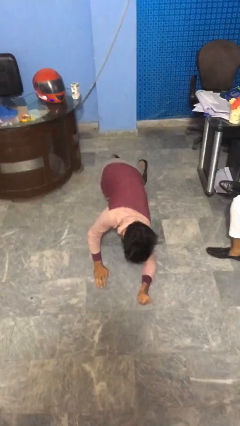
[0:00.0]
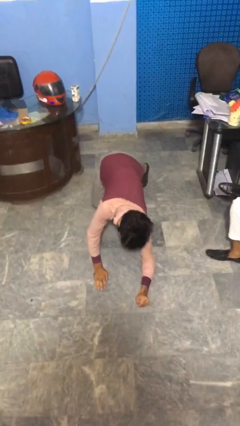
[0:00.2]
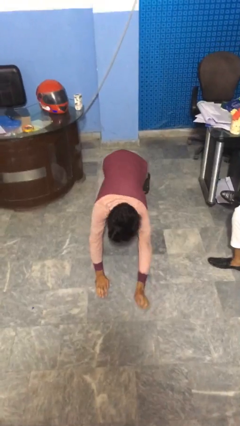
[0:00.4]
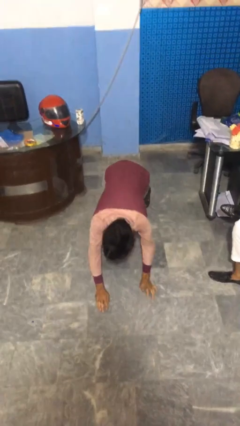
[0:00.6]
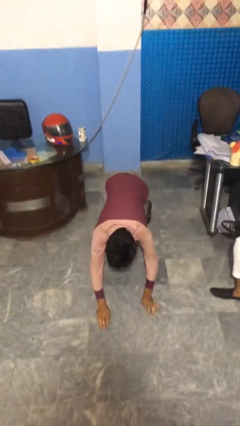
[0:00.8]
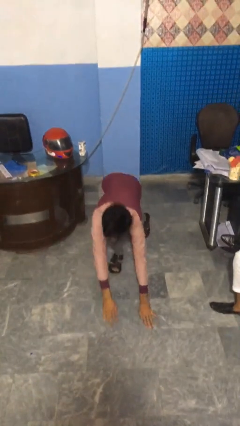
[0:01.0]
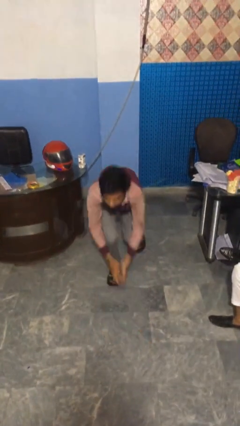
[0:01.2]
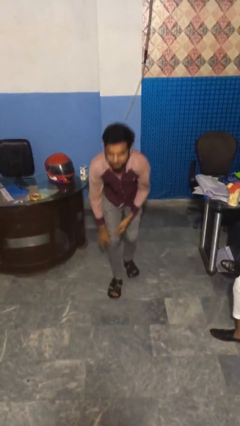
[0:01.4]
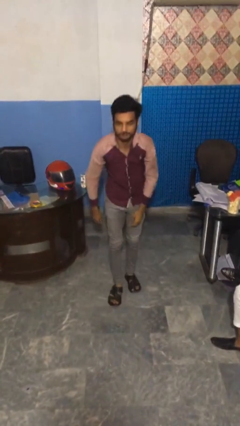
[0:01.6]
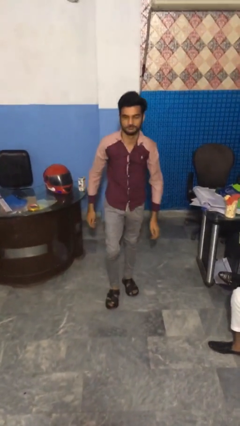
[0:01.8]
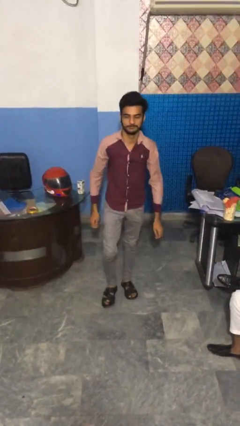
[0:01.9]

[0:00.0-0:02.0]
person stands up from floor

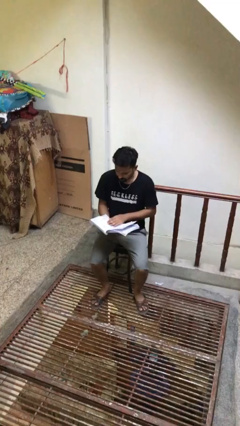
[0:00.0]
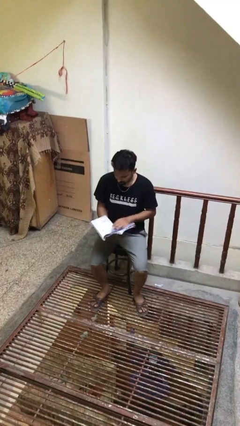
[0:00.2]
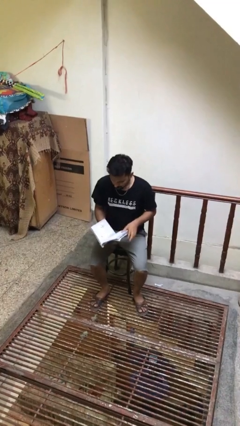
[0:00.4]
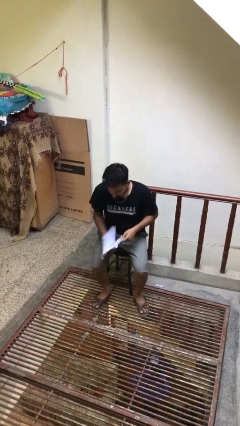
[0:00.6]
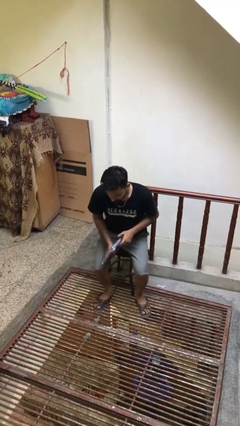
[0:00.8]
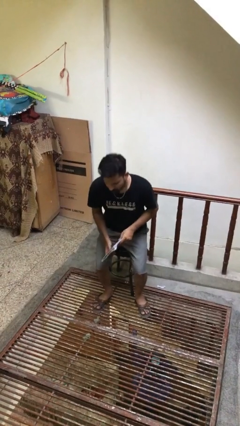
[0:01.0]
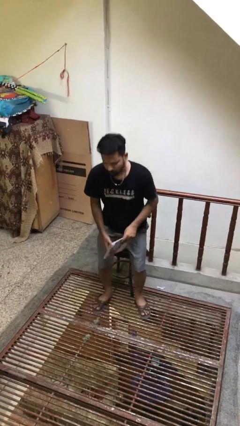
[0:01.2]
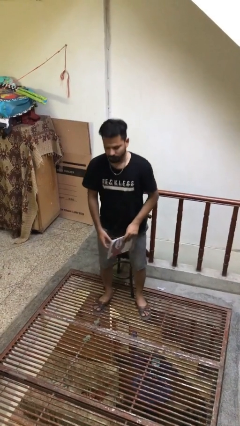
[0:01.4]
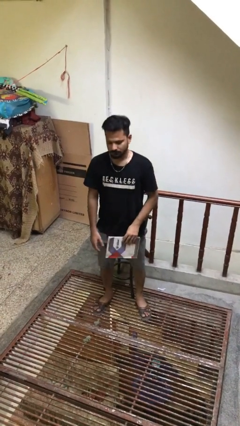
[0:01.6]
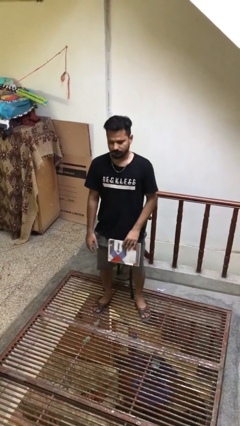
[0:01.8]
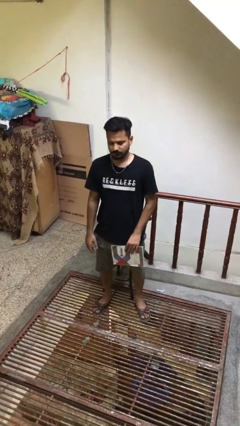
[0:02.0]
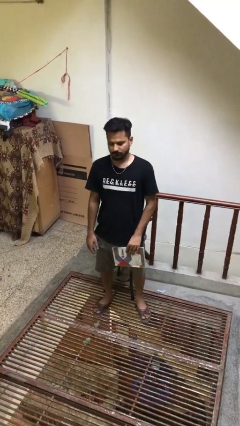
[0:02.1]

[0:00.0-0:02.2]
person stands up

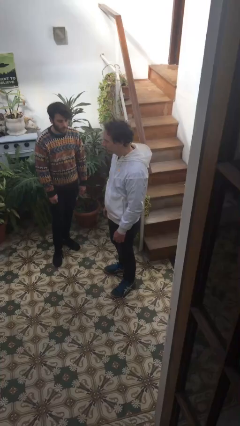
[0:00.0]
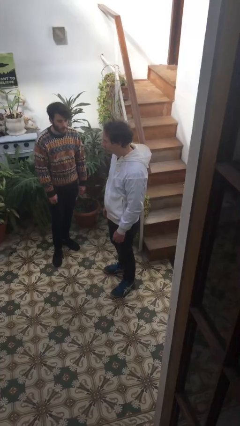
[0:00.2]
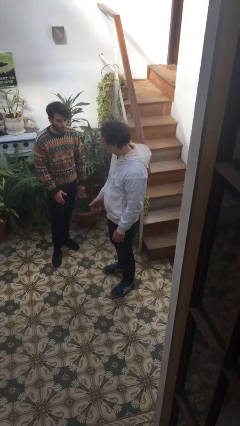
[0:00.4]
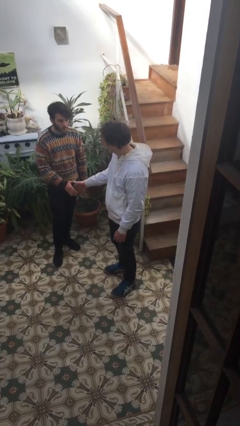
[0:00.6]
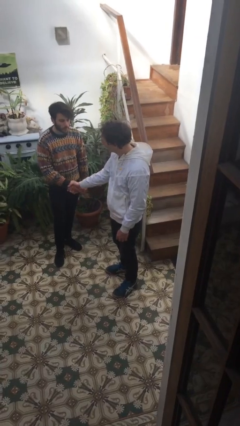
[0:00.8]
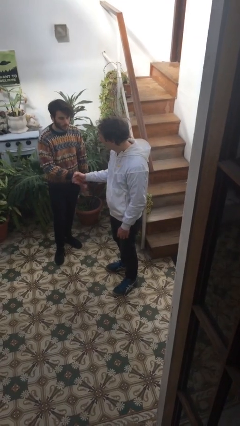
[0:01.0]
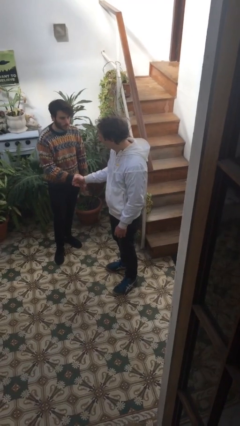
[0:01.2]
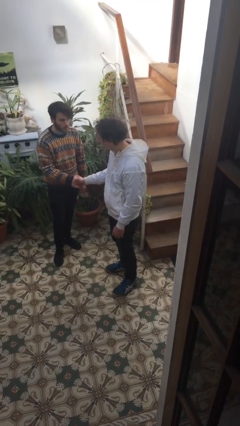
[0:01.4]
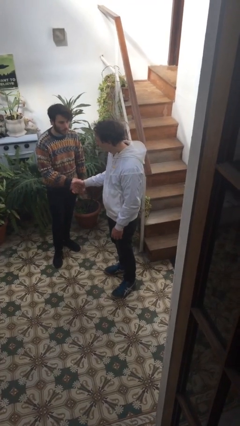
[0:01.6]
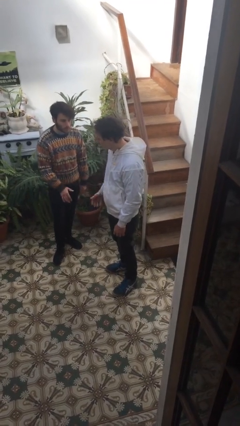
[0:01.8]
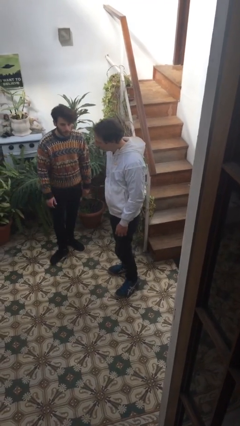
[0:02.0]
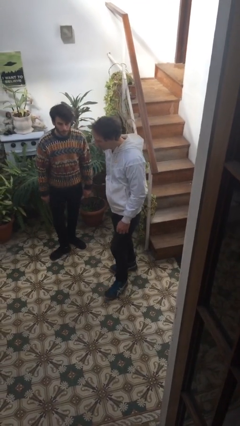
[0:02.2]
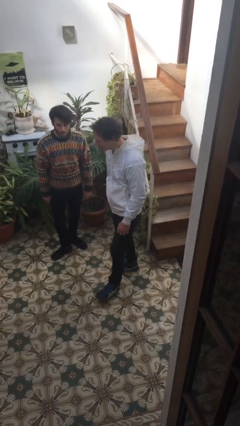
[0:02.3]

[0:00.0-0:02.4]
person shakes hand

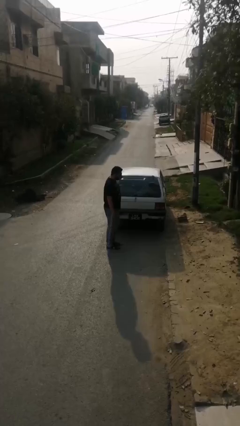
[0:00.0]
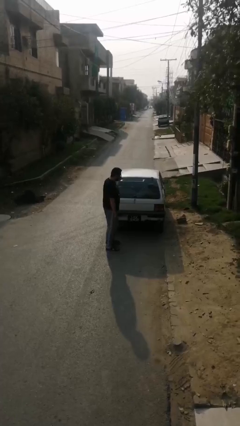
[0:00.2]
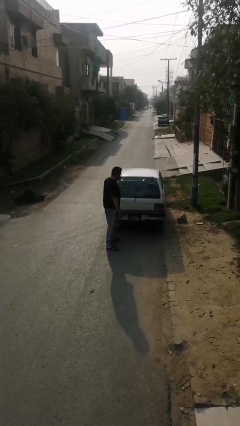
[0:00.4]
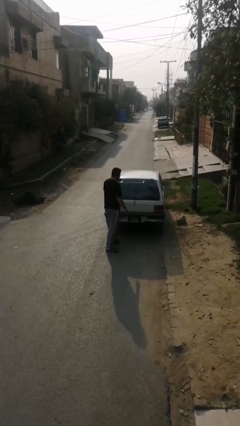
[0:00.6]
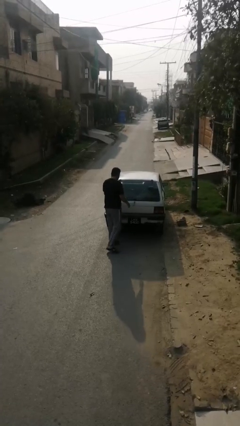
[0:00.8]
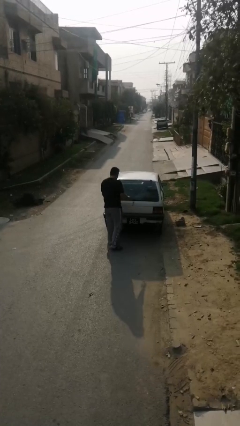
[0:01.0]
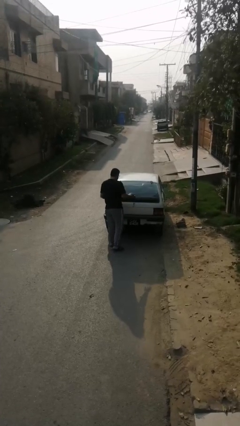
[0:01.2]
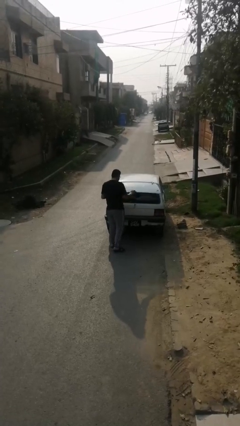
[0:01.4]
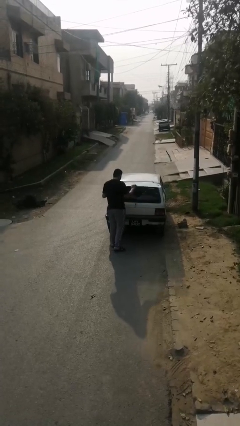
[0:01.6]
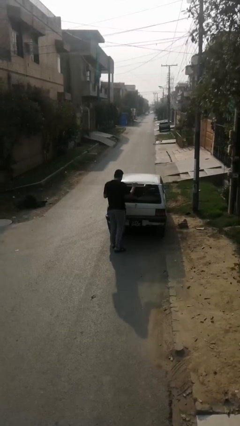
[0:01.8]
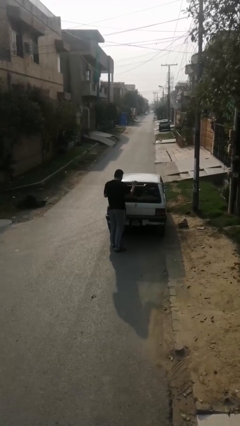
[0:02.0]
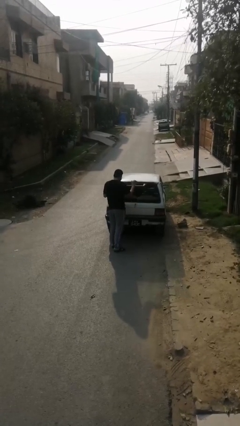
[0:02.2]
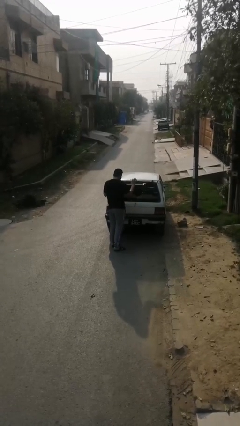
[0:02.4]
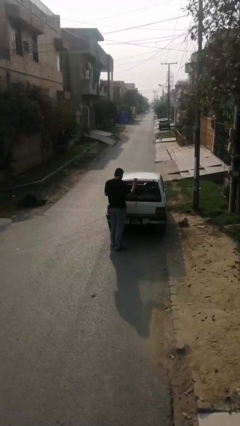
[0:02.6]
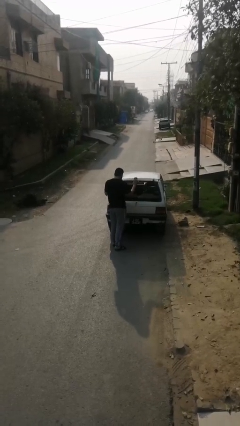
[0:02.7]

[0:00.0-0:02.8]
person opens car trunk

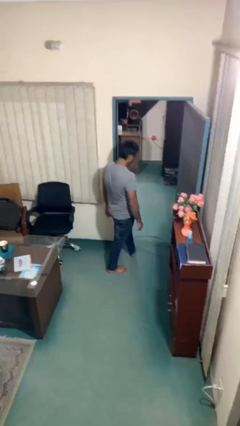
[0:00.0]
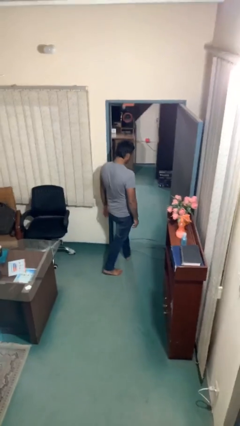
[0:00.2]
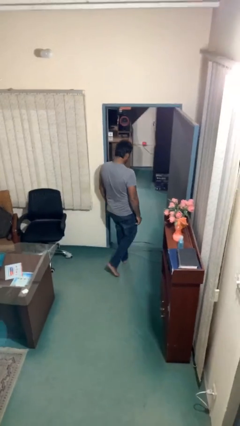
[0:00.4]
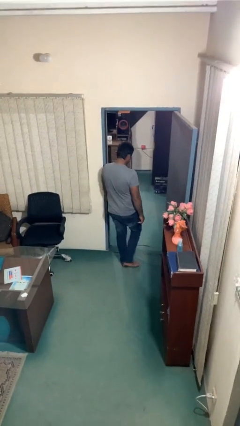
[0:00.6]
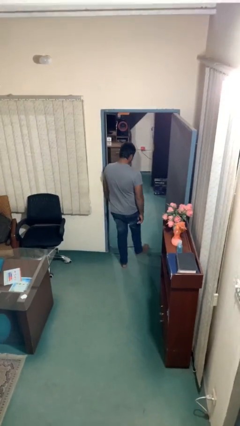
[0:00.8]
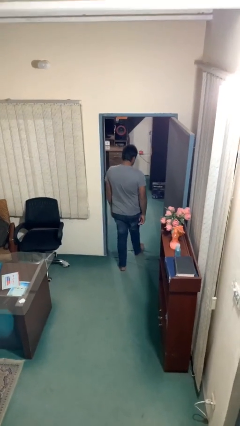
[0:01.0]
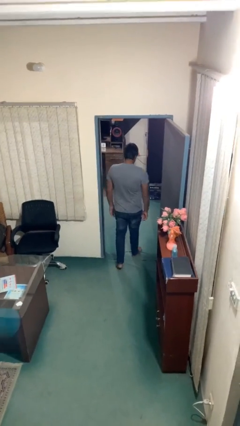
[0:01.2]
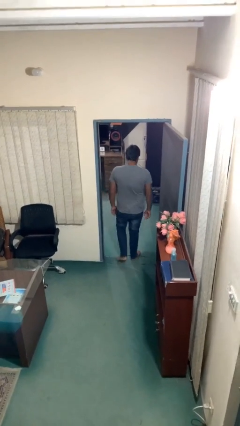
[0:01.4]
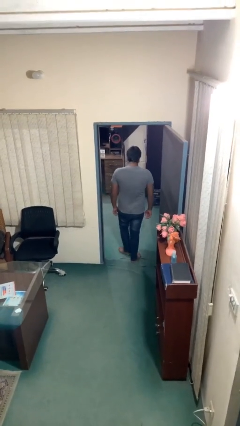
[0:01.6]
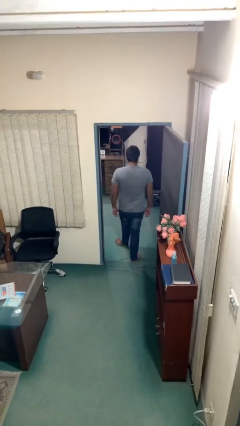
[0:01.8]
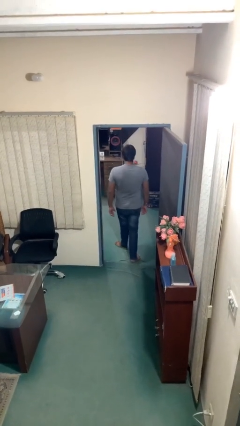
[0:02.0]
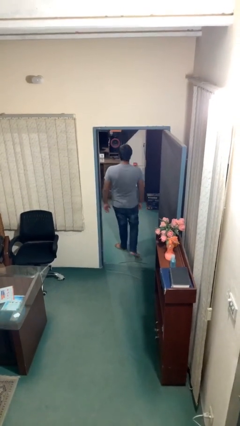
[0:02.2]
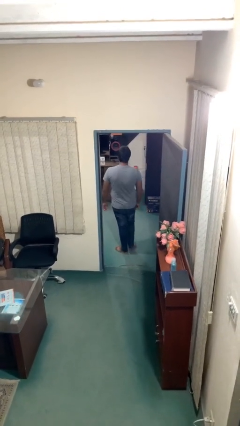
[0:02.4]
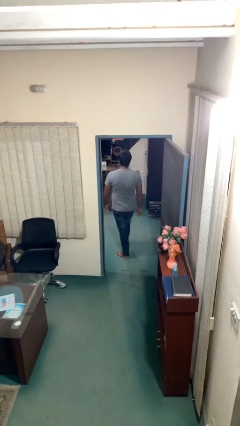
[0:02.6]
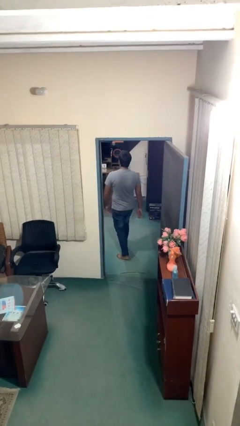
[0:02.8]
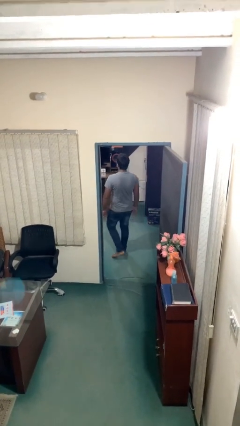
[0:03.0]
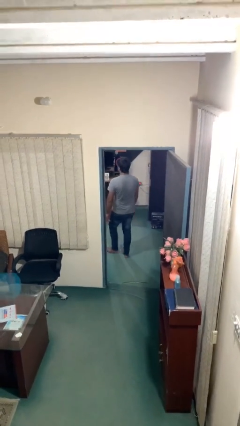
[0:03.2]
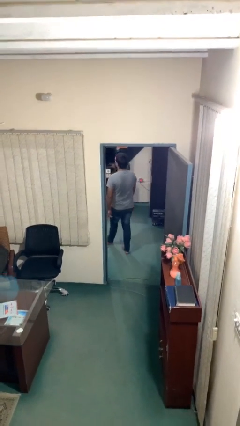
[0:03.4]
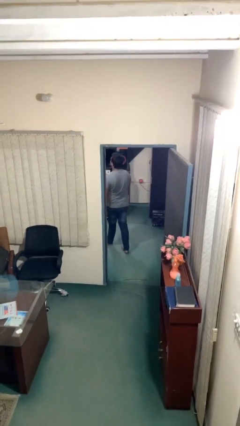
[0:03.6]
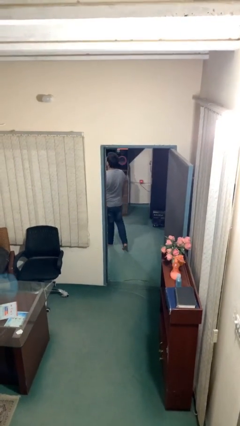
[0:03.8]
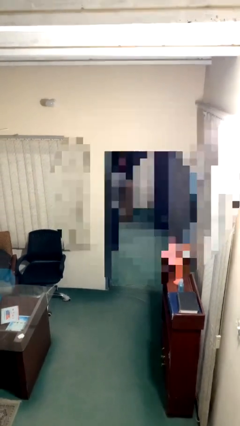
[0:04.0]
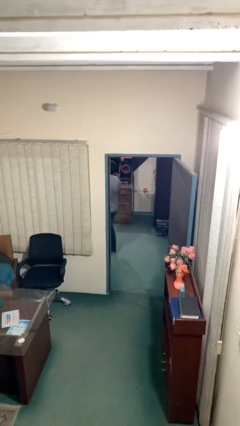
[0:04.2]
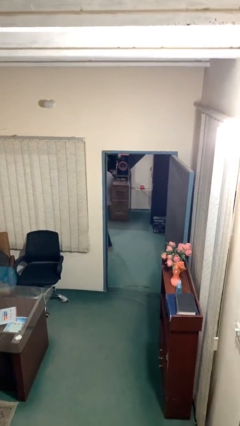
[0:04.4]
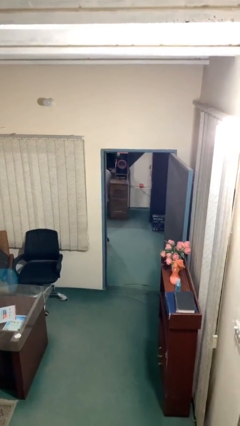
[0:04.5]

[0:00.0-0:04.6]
person exits scene through structure

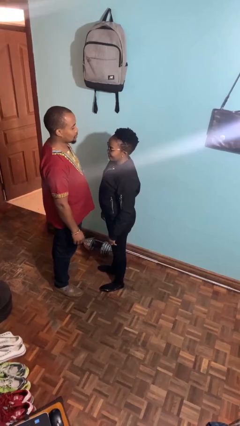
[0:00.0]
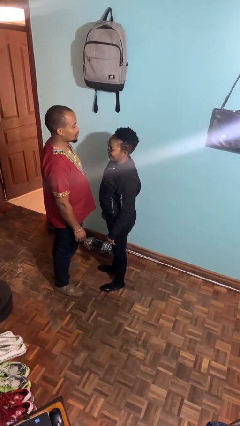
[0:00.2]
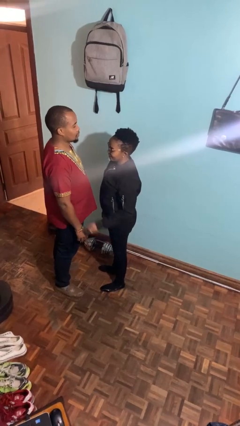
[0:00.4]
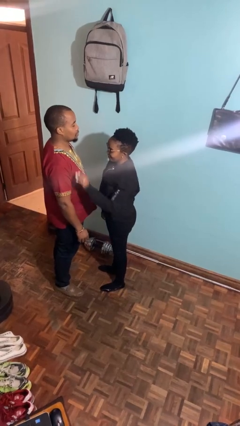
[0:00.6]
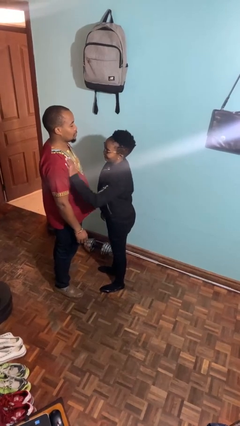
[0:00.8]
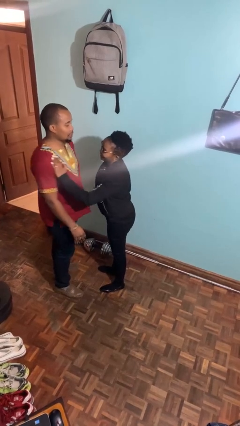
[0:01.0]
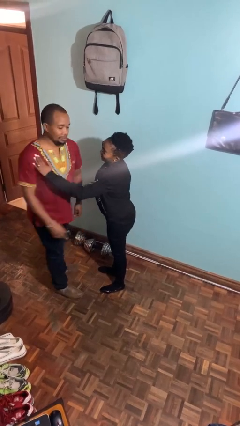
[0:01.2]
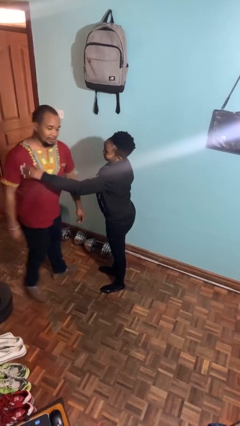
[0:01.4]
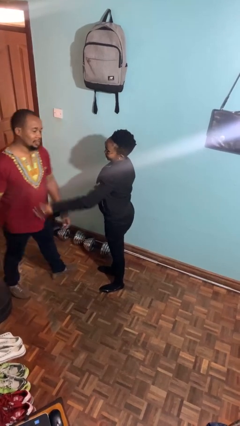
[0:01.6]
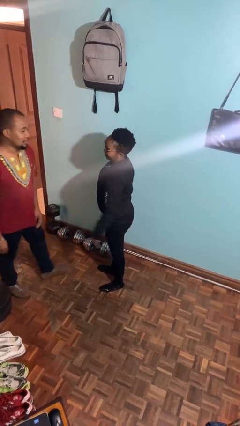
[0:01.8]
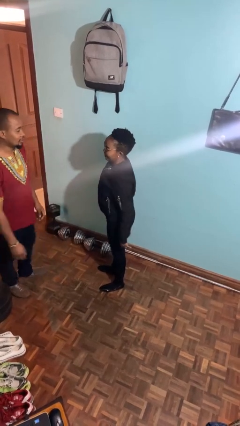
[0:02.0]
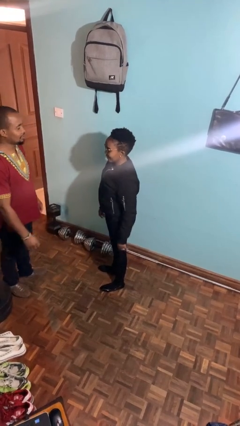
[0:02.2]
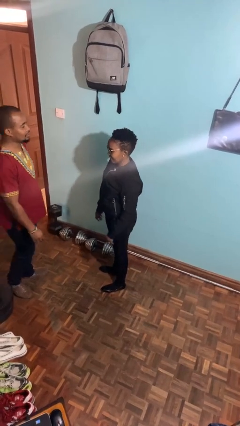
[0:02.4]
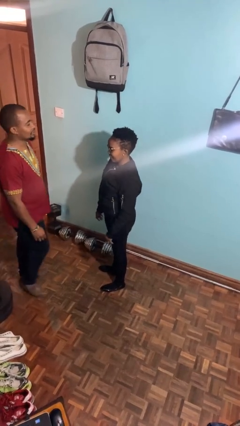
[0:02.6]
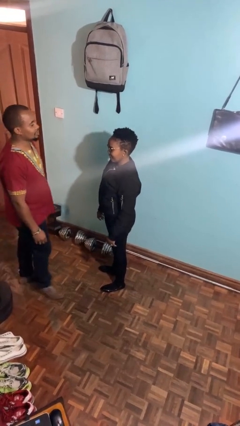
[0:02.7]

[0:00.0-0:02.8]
person shoves person

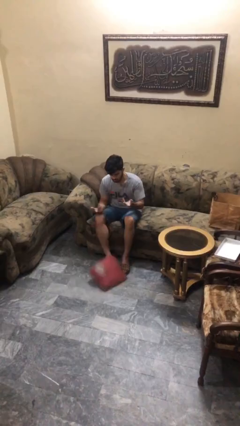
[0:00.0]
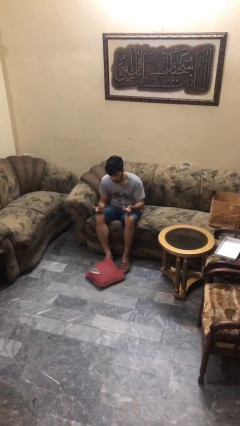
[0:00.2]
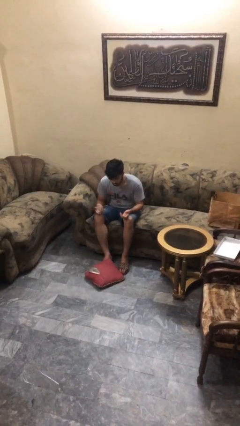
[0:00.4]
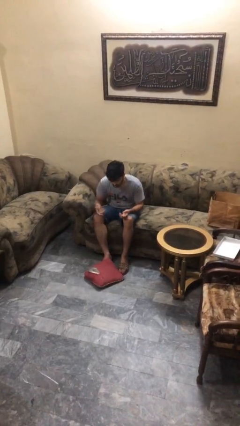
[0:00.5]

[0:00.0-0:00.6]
person drops object
